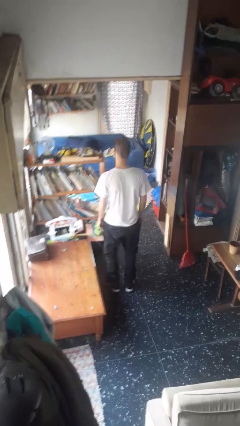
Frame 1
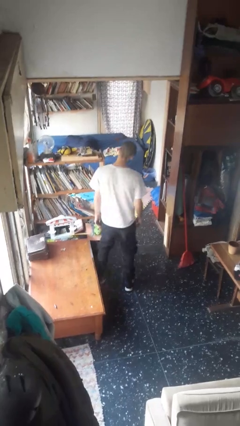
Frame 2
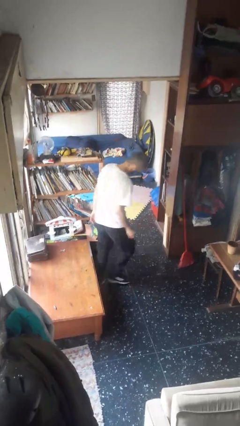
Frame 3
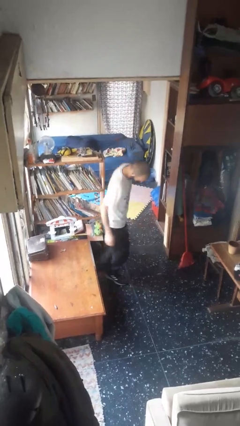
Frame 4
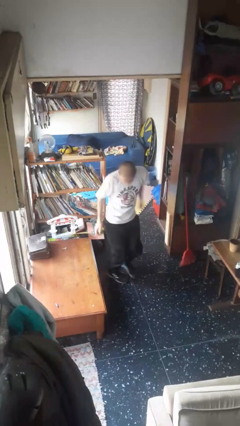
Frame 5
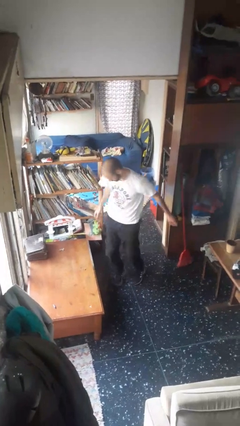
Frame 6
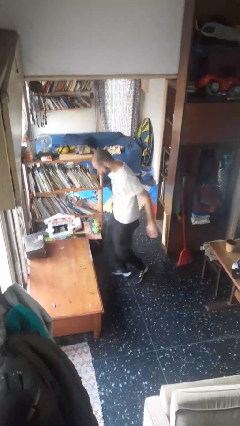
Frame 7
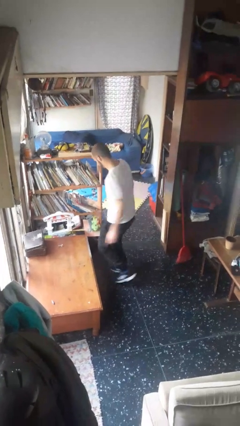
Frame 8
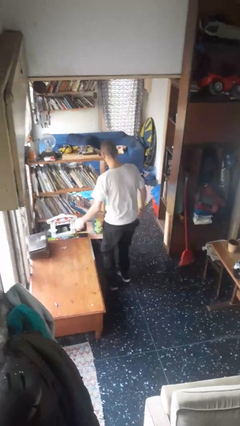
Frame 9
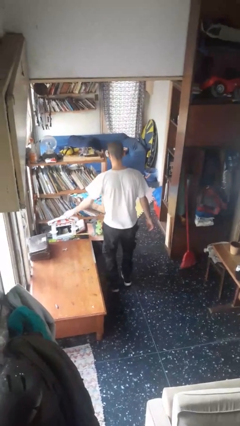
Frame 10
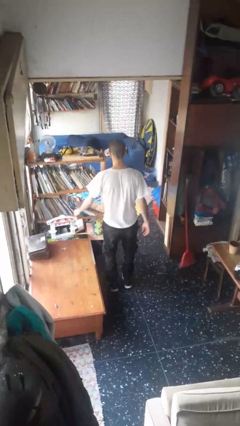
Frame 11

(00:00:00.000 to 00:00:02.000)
person twirls

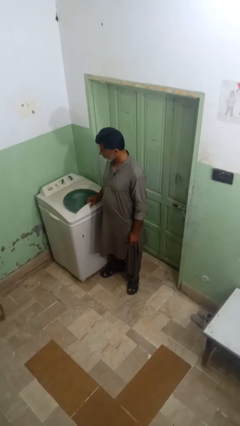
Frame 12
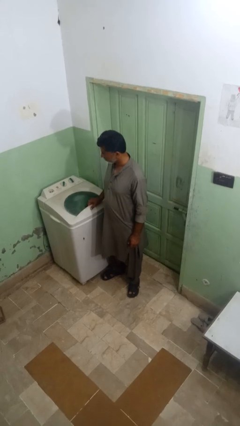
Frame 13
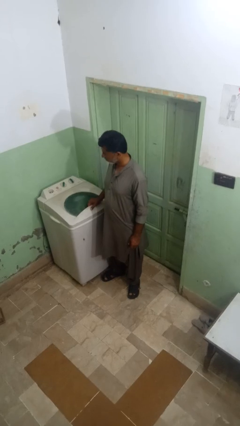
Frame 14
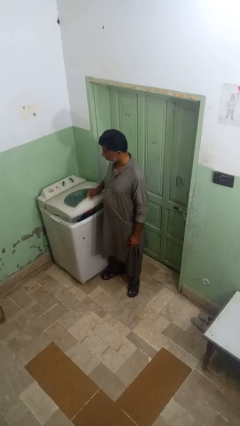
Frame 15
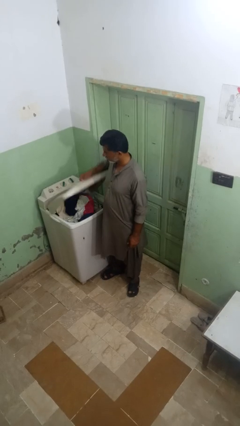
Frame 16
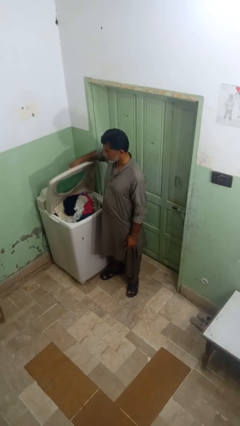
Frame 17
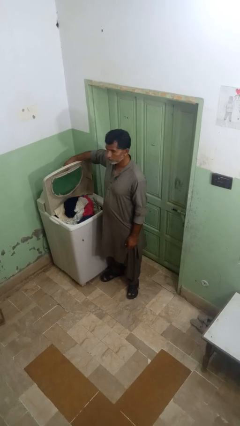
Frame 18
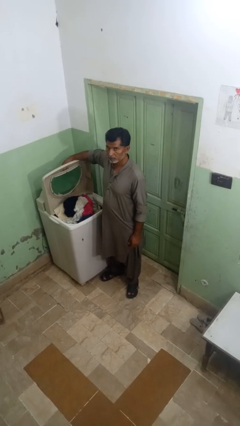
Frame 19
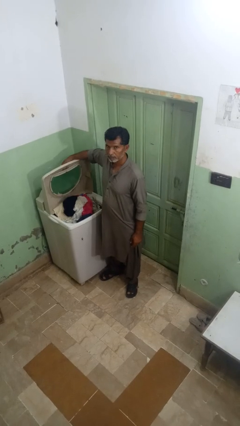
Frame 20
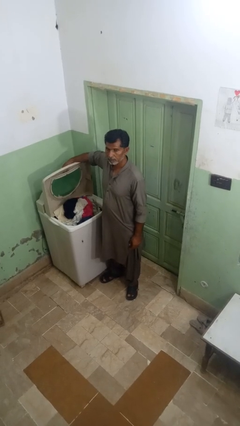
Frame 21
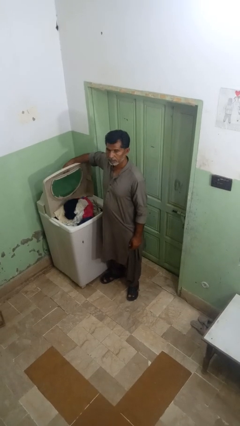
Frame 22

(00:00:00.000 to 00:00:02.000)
person opens clothes washer

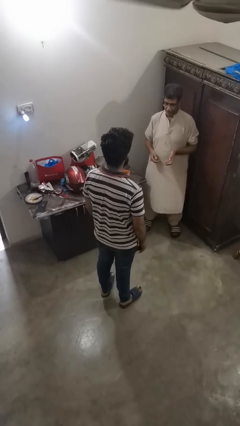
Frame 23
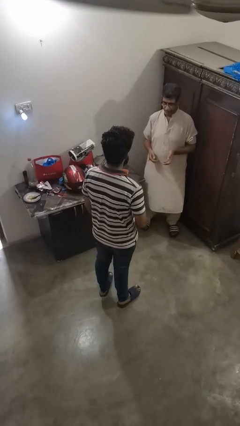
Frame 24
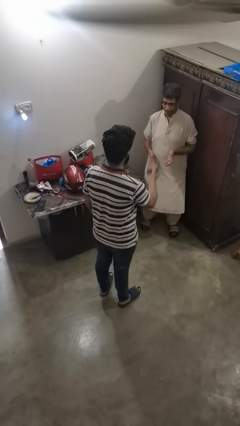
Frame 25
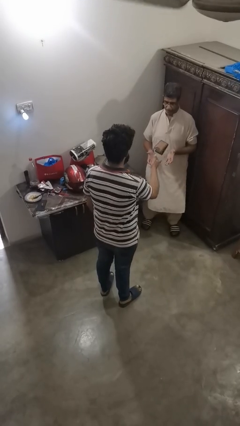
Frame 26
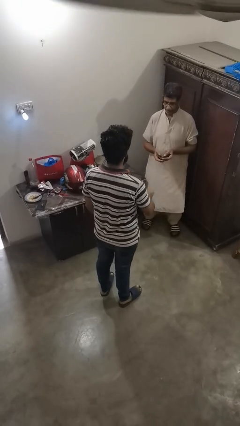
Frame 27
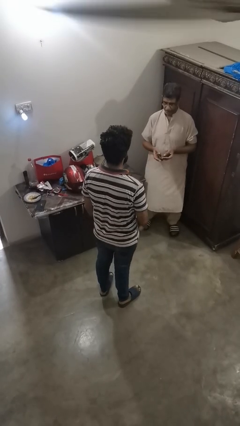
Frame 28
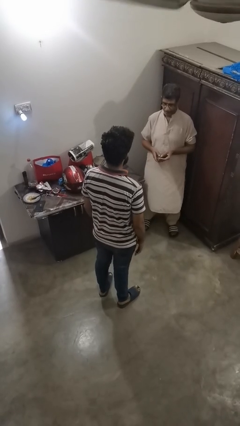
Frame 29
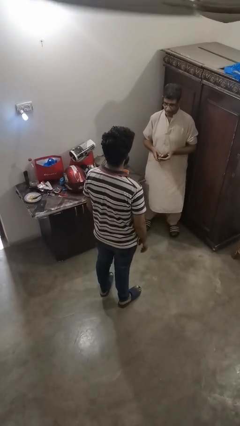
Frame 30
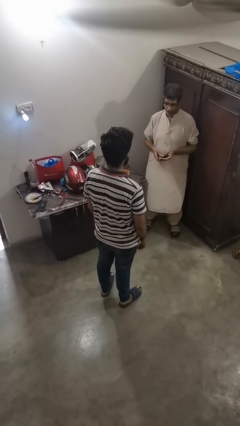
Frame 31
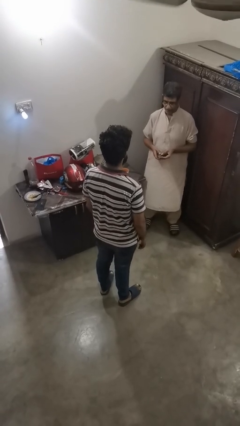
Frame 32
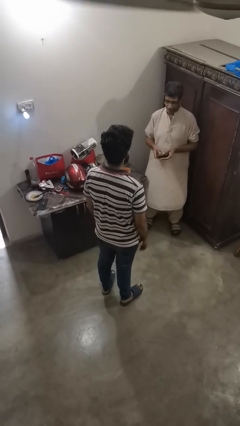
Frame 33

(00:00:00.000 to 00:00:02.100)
person throws object to person

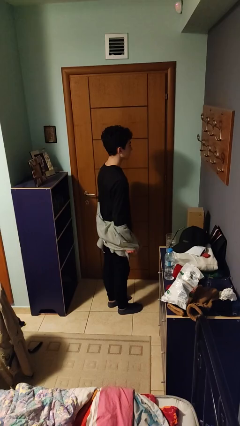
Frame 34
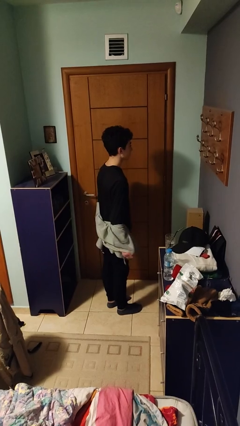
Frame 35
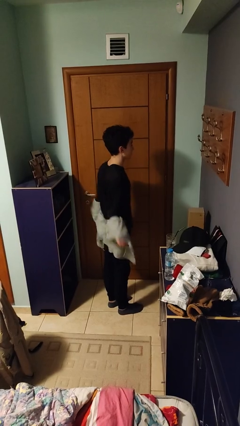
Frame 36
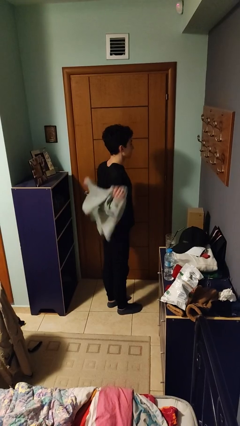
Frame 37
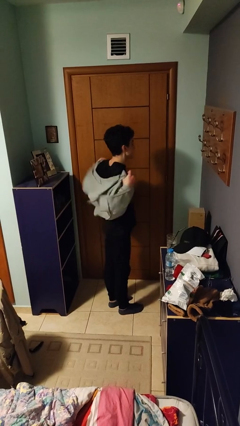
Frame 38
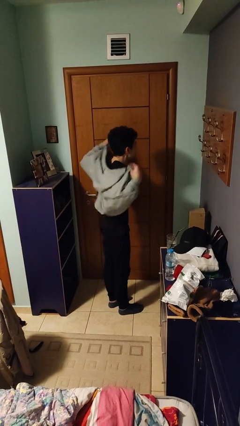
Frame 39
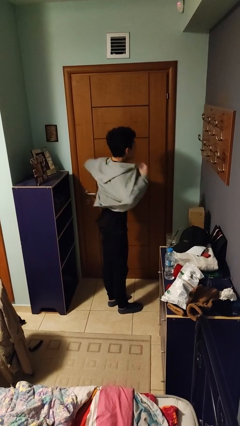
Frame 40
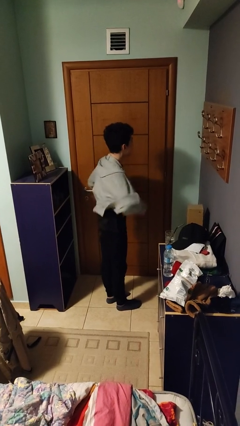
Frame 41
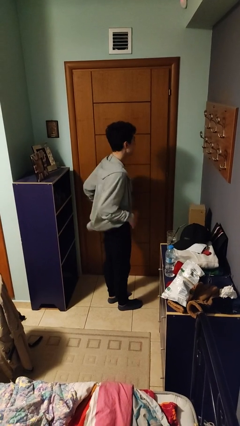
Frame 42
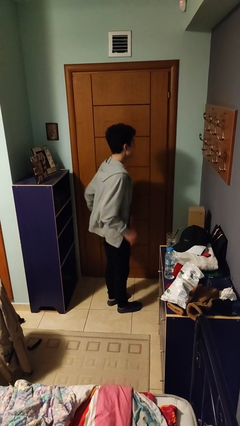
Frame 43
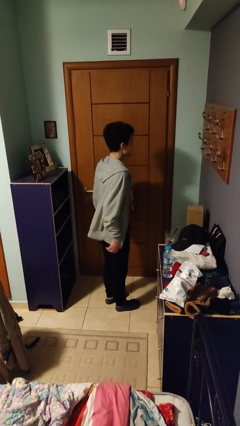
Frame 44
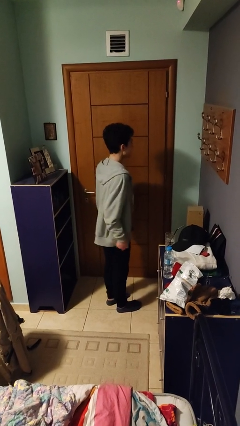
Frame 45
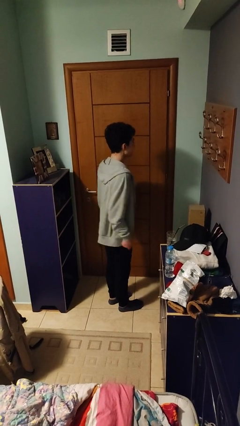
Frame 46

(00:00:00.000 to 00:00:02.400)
person puts on jacket

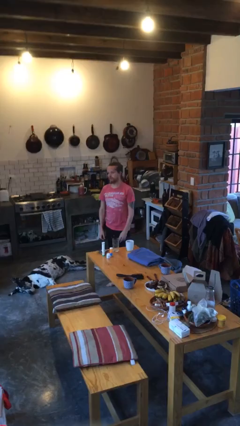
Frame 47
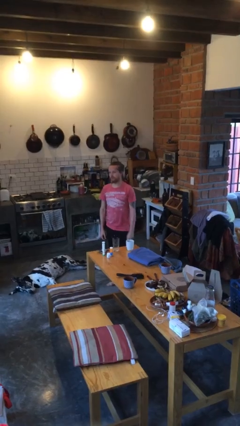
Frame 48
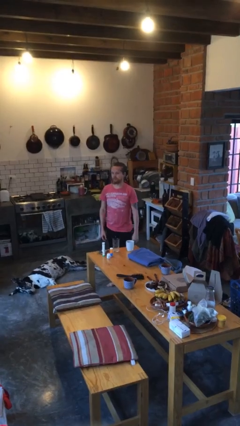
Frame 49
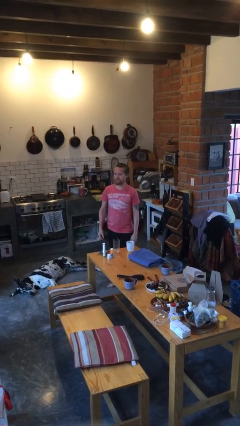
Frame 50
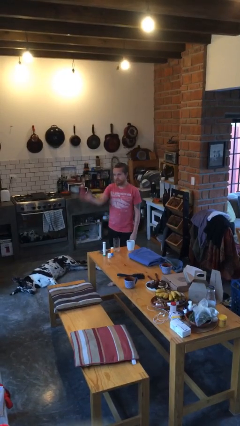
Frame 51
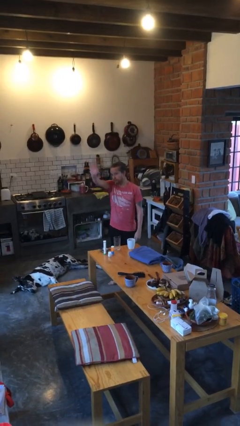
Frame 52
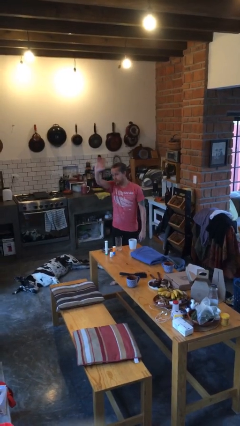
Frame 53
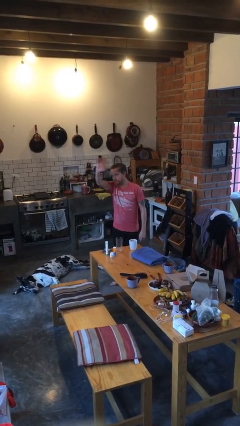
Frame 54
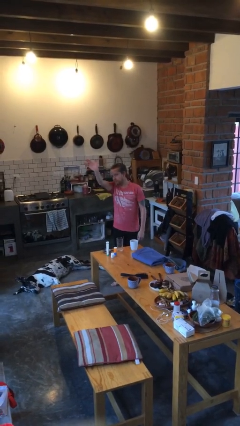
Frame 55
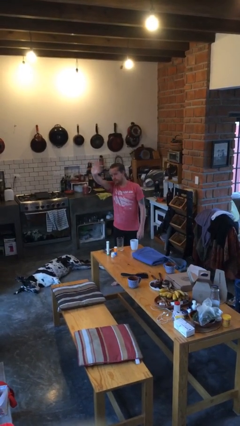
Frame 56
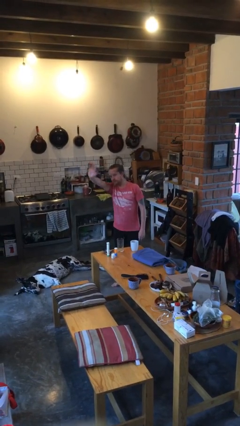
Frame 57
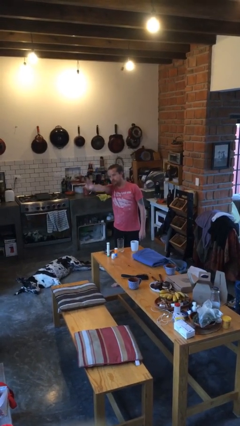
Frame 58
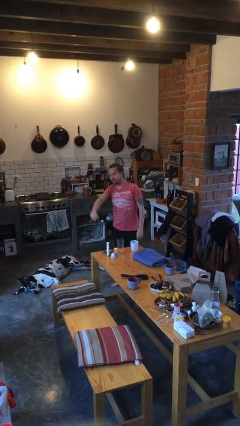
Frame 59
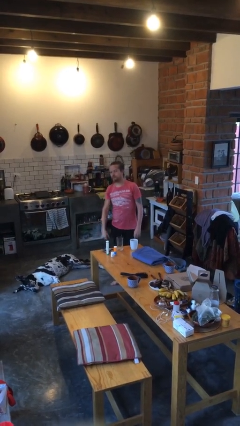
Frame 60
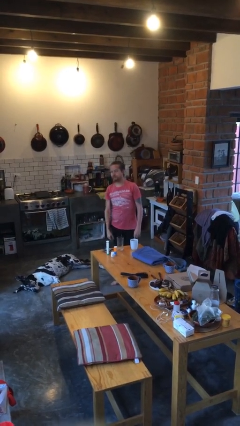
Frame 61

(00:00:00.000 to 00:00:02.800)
person waves at person

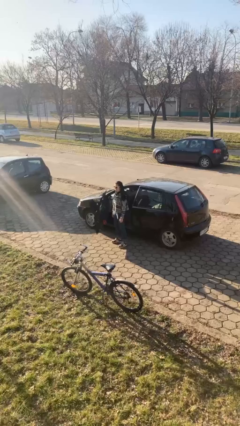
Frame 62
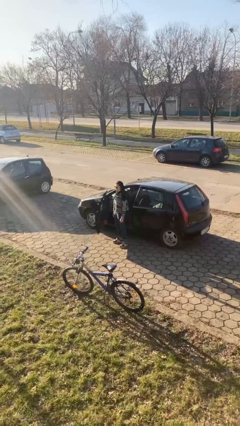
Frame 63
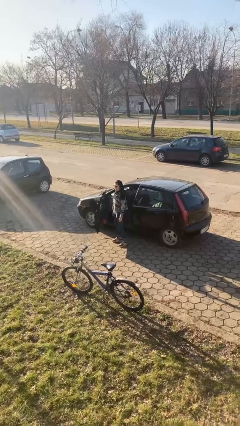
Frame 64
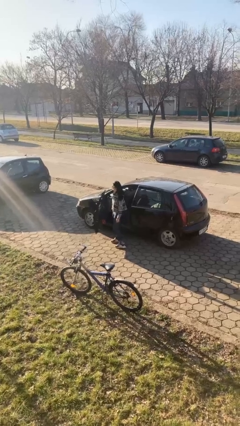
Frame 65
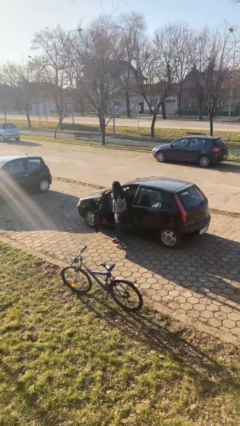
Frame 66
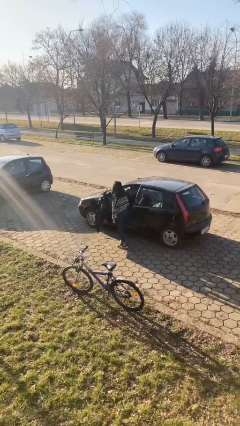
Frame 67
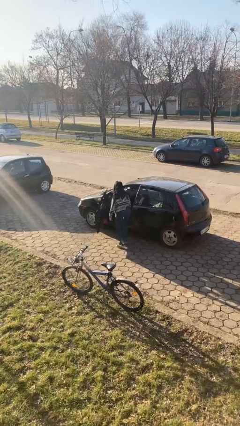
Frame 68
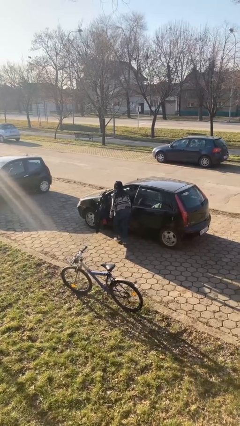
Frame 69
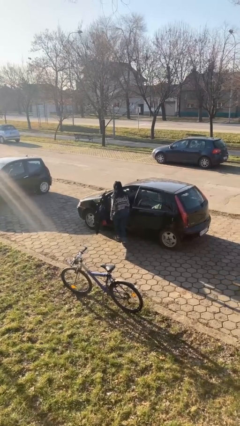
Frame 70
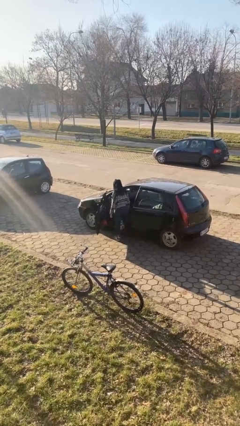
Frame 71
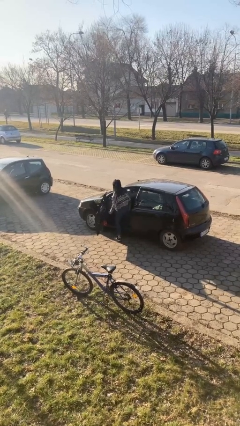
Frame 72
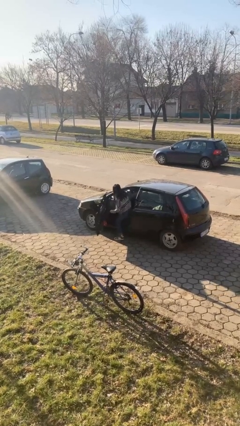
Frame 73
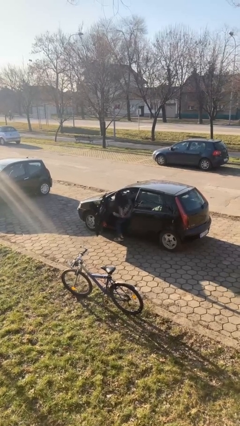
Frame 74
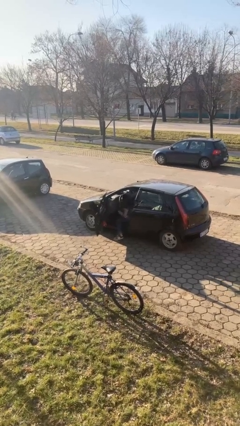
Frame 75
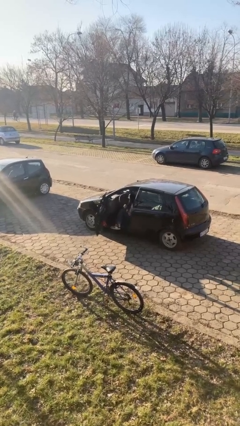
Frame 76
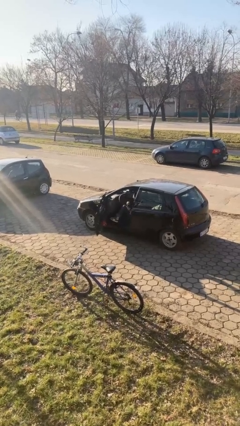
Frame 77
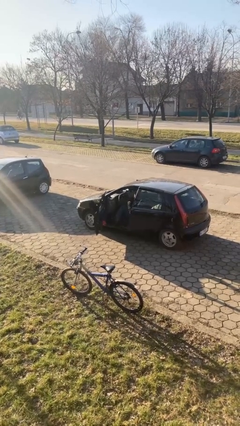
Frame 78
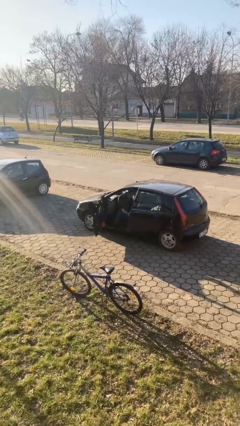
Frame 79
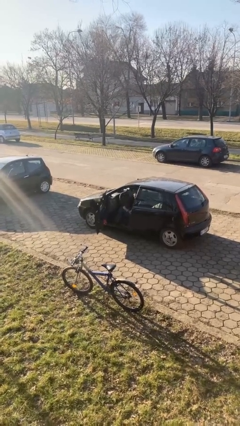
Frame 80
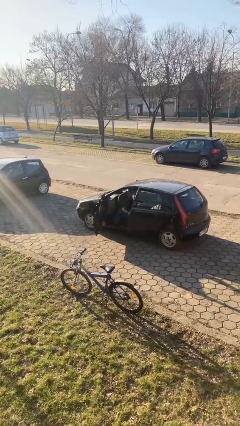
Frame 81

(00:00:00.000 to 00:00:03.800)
person enters car

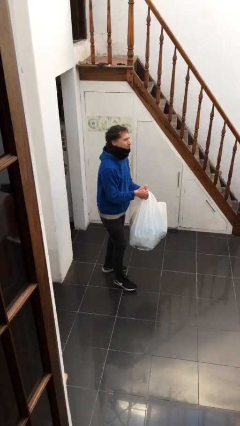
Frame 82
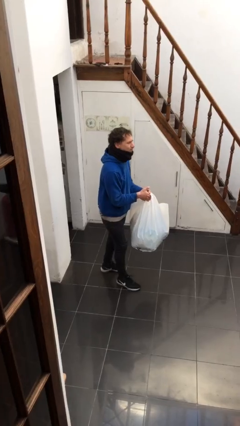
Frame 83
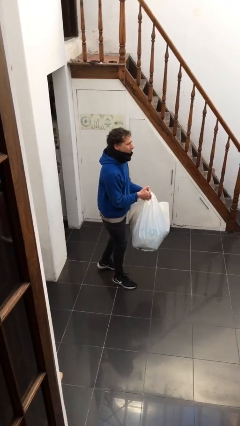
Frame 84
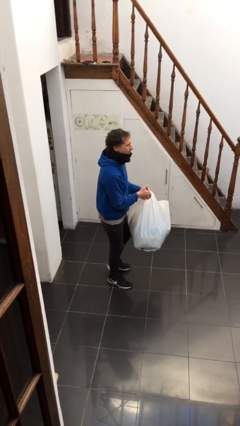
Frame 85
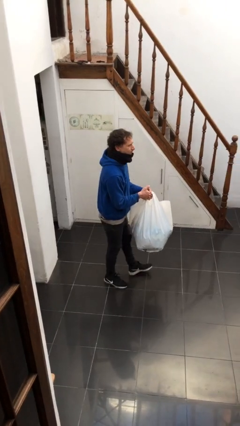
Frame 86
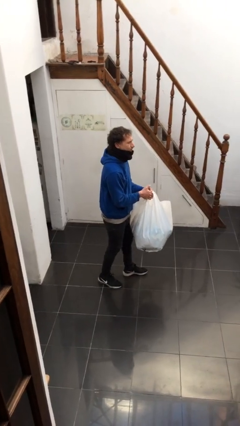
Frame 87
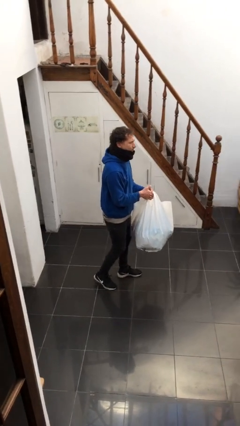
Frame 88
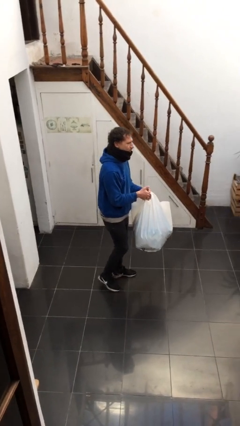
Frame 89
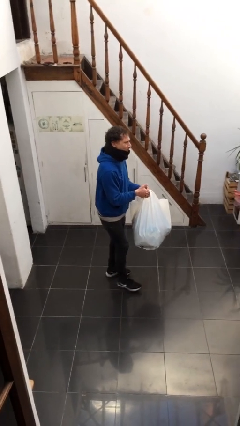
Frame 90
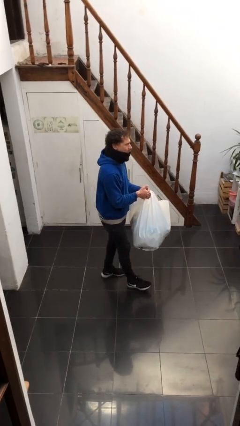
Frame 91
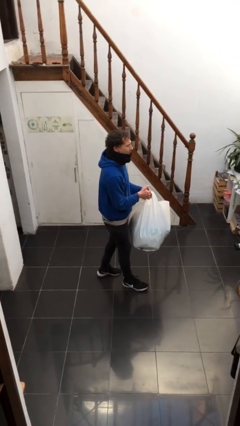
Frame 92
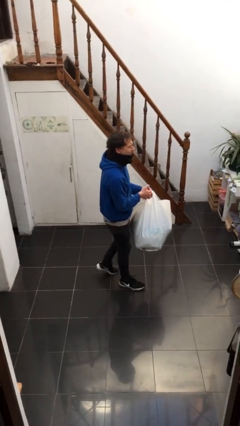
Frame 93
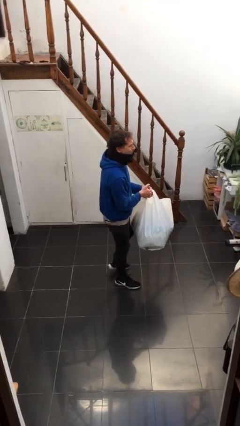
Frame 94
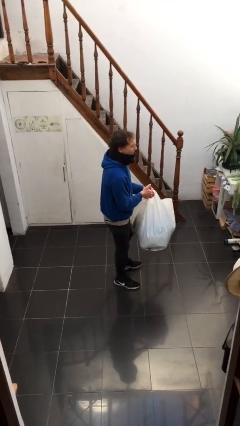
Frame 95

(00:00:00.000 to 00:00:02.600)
person carries heavy object

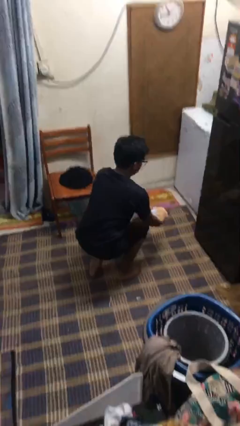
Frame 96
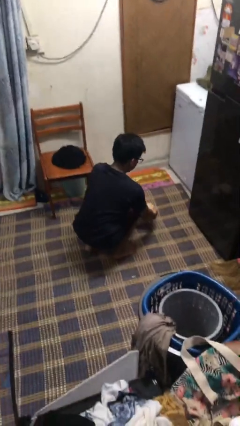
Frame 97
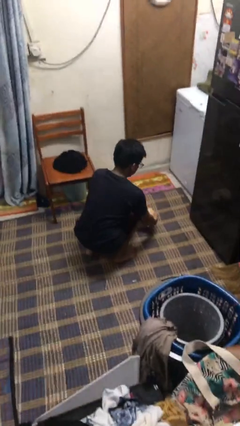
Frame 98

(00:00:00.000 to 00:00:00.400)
person catches dropped object
